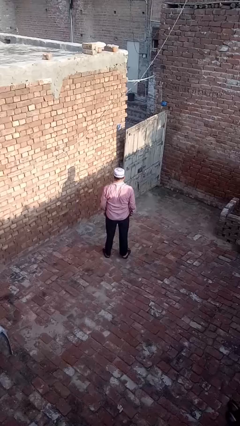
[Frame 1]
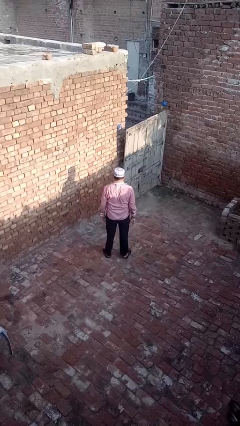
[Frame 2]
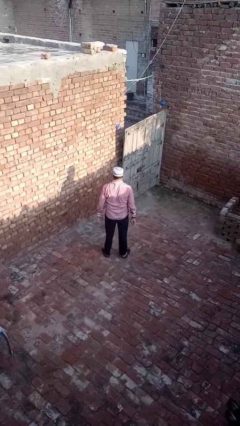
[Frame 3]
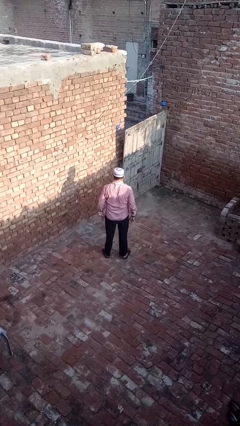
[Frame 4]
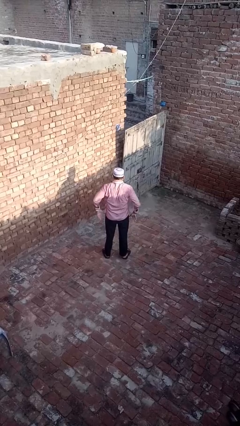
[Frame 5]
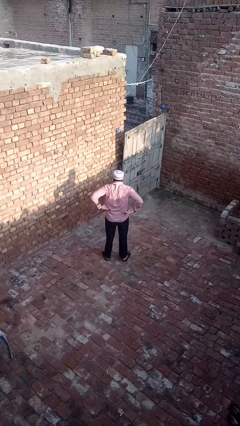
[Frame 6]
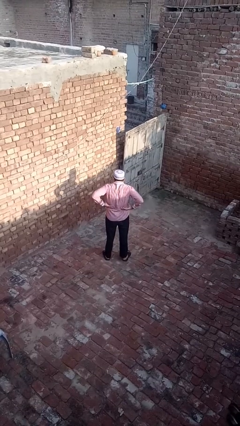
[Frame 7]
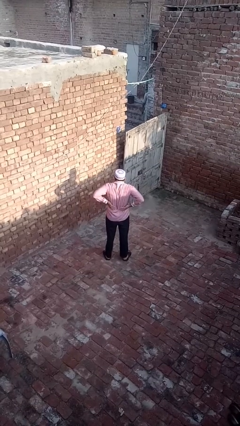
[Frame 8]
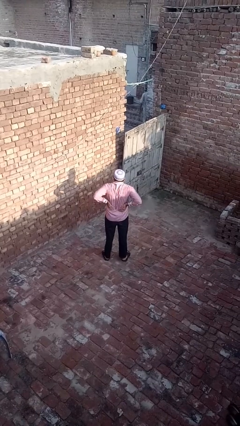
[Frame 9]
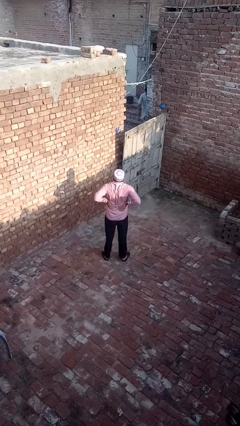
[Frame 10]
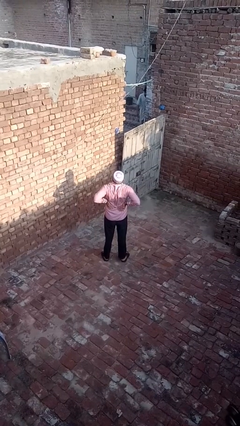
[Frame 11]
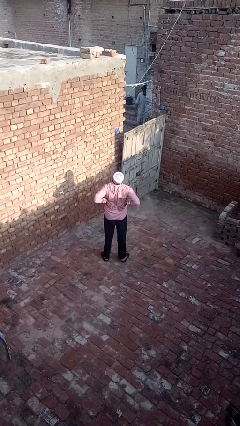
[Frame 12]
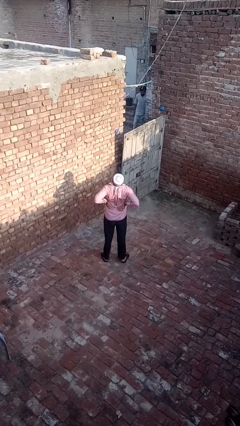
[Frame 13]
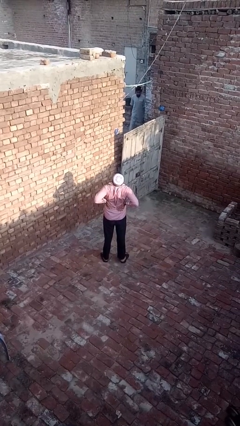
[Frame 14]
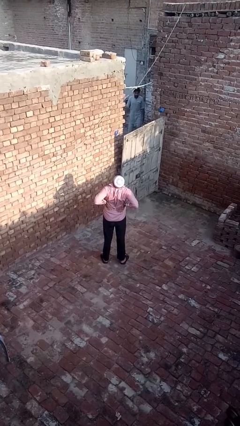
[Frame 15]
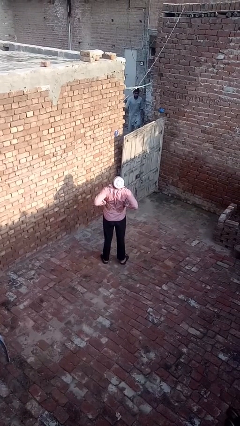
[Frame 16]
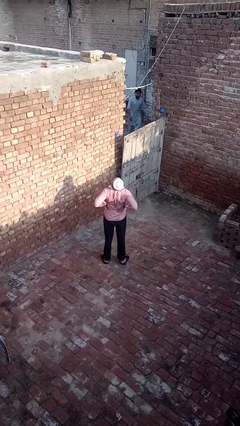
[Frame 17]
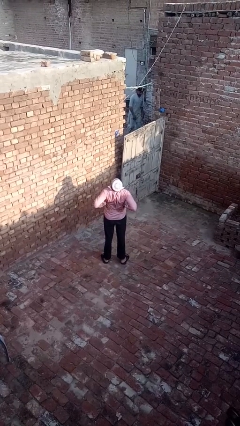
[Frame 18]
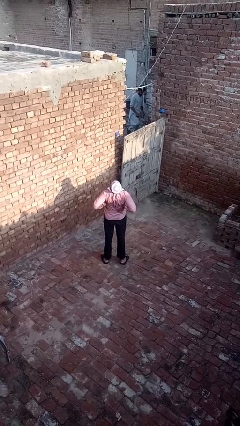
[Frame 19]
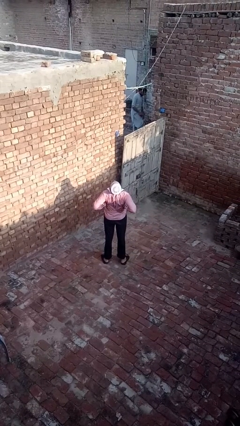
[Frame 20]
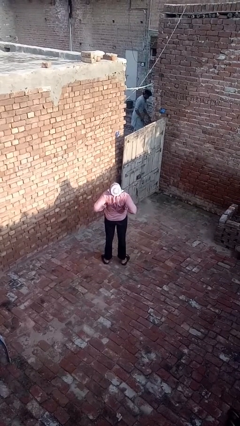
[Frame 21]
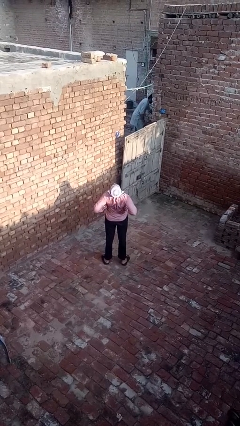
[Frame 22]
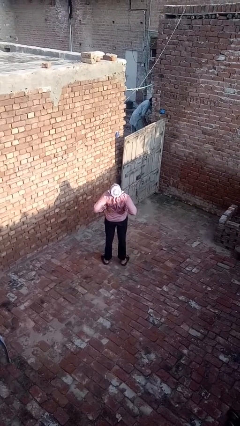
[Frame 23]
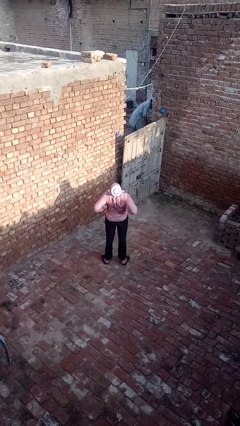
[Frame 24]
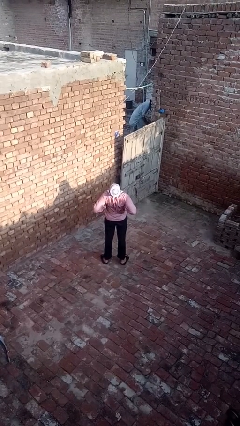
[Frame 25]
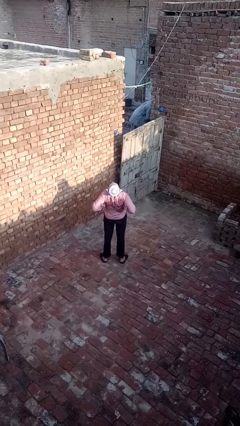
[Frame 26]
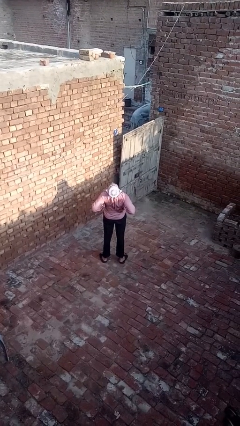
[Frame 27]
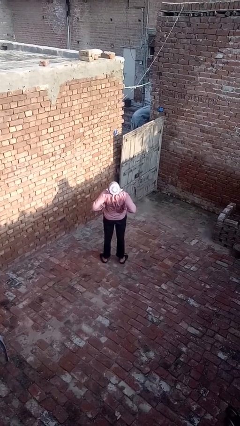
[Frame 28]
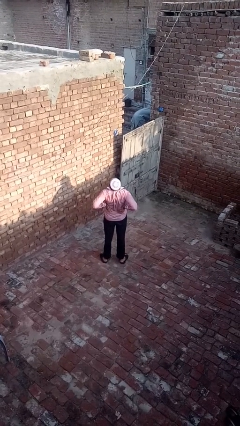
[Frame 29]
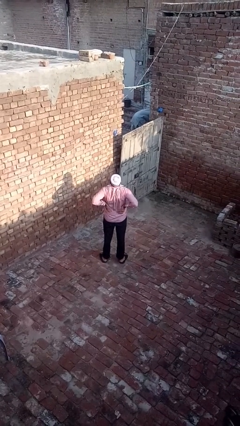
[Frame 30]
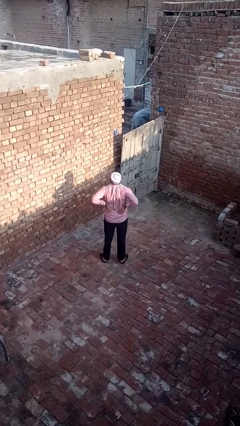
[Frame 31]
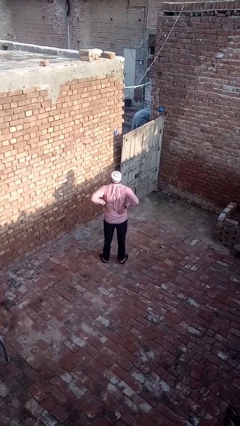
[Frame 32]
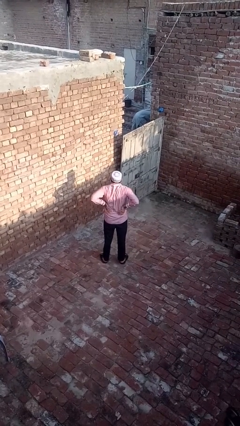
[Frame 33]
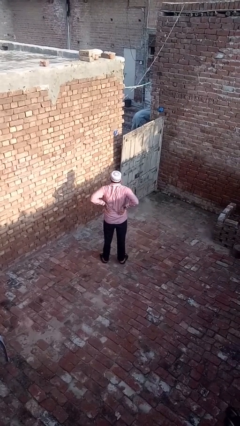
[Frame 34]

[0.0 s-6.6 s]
person stretches back

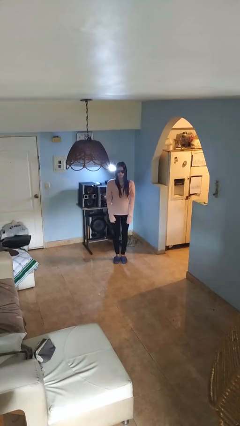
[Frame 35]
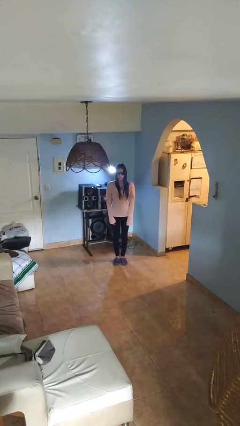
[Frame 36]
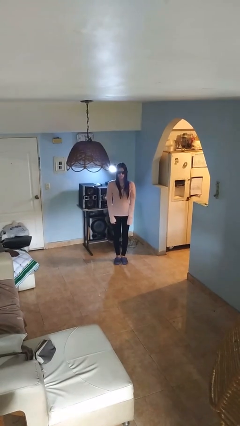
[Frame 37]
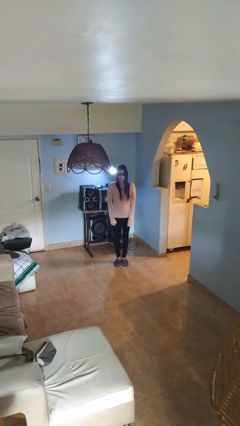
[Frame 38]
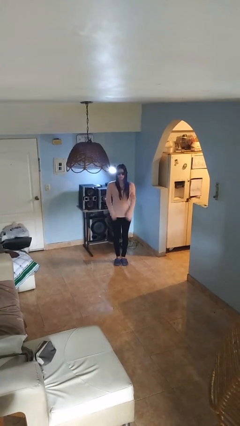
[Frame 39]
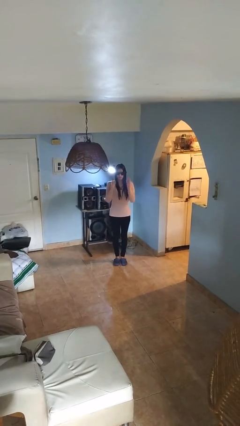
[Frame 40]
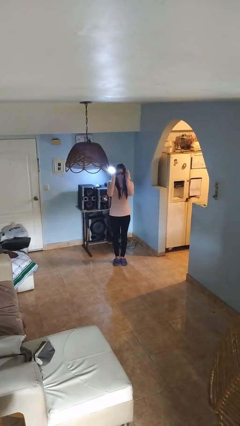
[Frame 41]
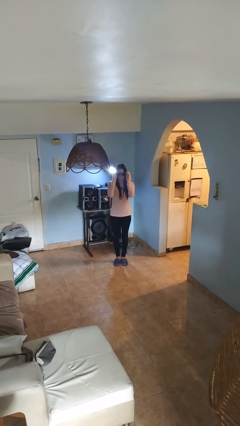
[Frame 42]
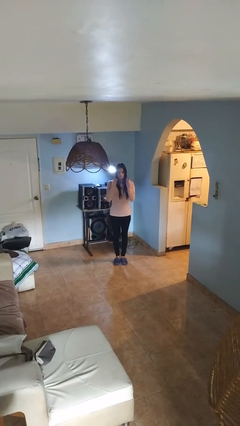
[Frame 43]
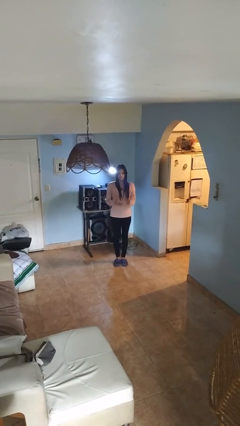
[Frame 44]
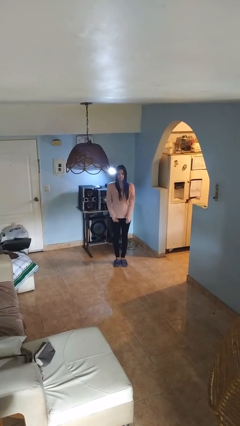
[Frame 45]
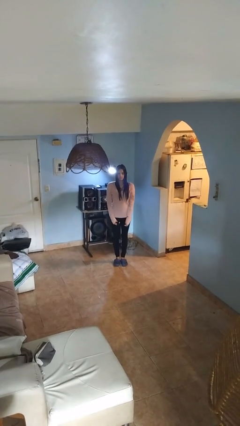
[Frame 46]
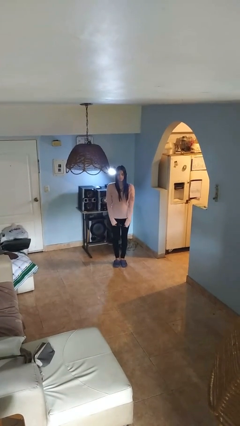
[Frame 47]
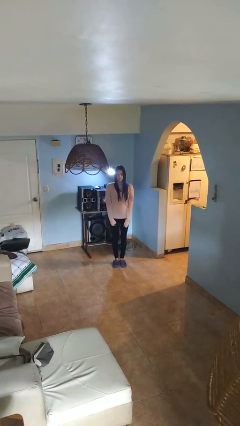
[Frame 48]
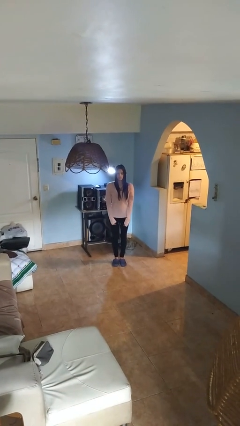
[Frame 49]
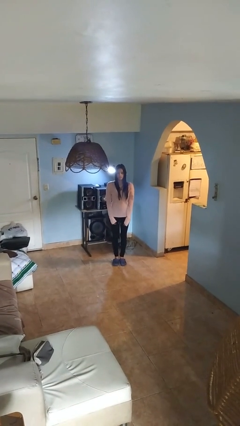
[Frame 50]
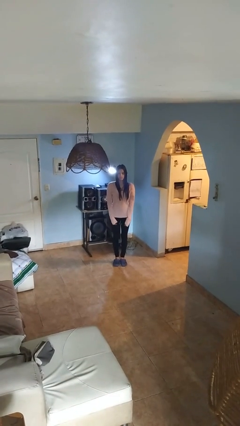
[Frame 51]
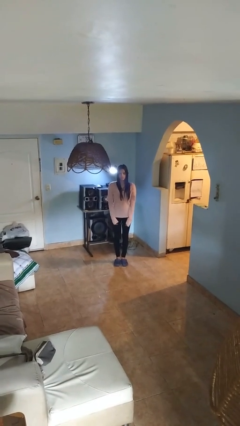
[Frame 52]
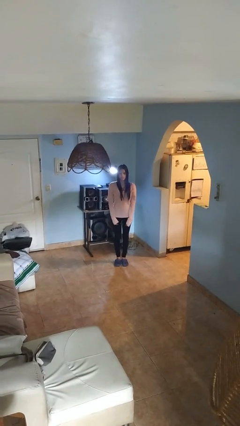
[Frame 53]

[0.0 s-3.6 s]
person takes off sunglasses

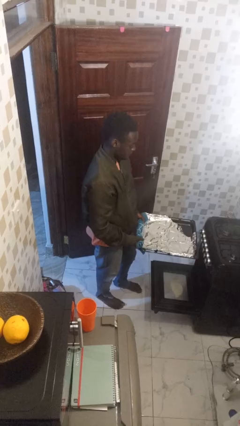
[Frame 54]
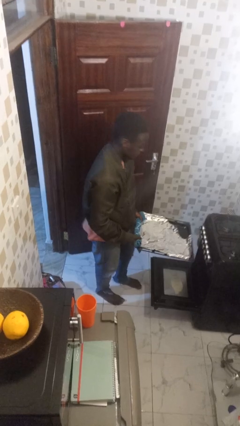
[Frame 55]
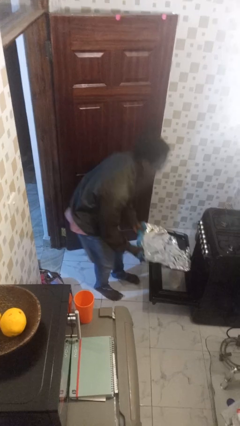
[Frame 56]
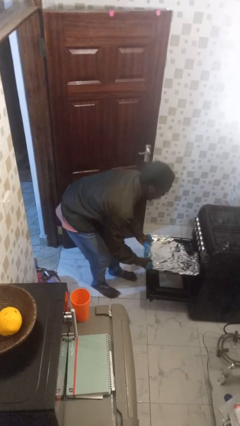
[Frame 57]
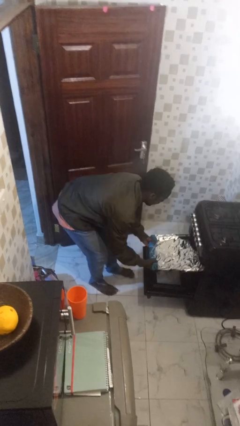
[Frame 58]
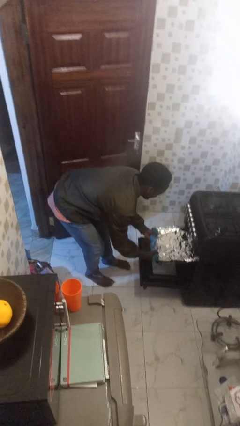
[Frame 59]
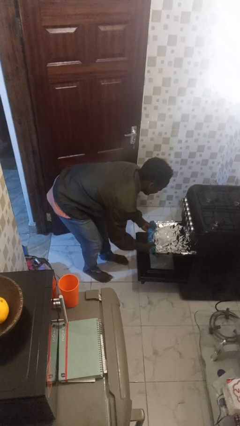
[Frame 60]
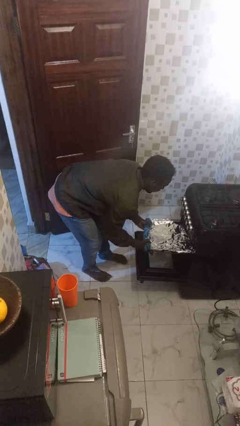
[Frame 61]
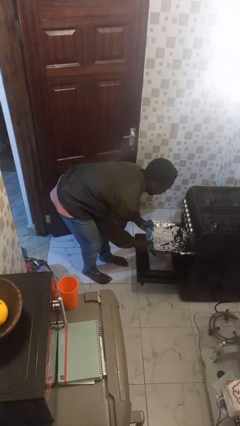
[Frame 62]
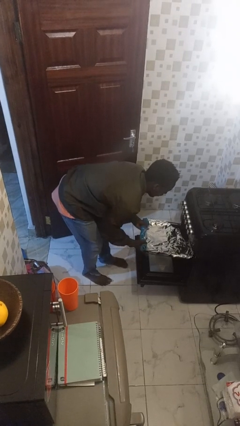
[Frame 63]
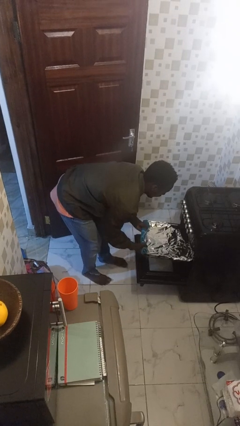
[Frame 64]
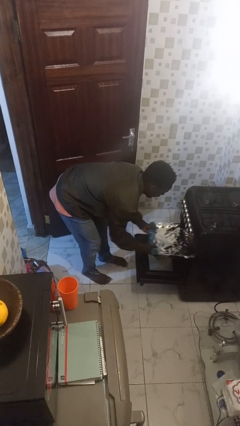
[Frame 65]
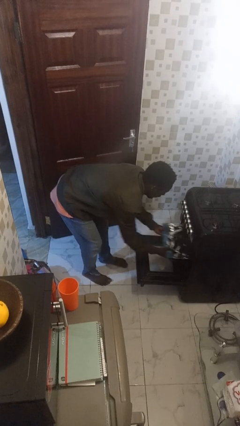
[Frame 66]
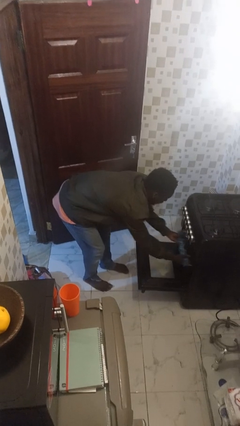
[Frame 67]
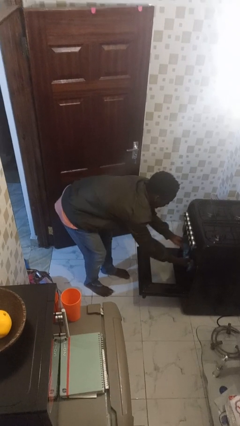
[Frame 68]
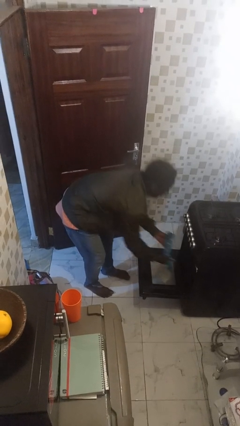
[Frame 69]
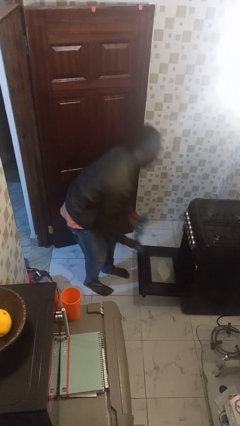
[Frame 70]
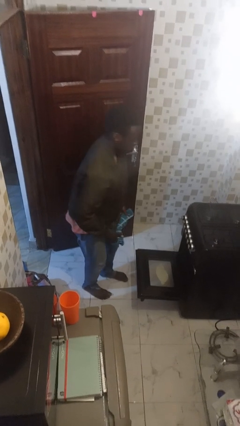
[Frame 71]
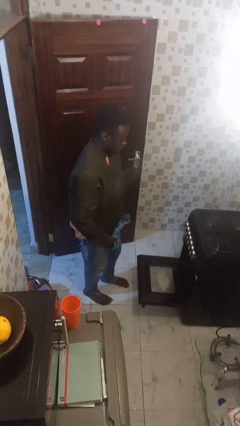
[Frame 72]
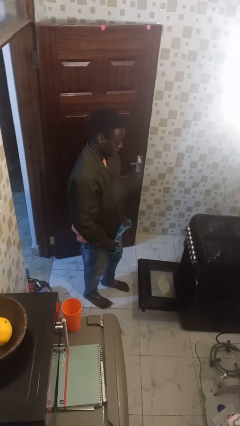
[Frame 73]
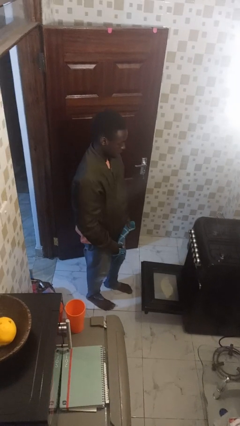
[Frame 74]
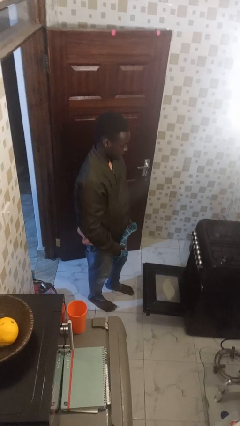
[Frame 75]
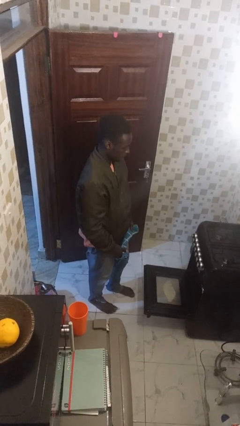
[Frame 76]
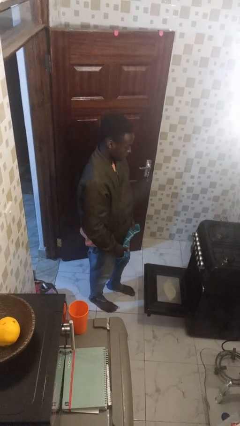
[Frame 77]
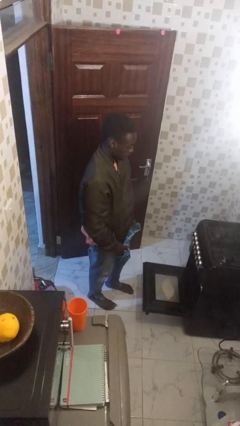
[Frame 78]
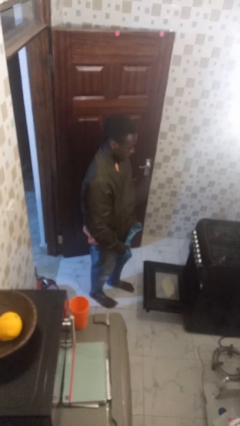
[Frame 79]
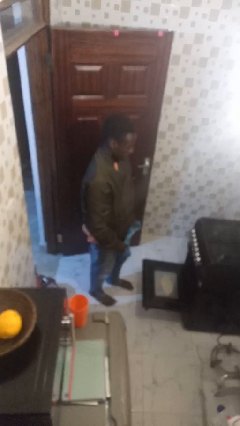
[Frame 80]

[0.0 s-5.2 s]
person puts object into oven

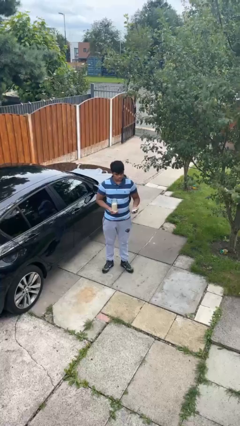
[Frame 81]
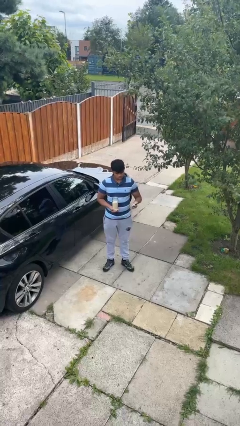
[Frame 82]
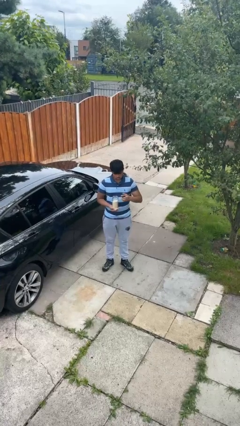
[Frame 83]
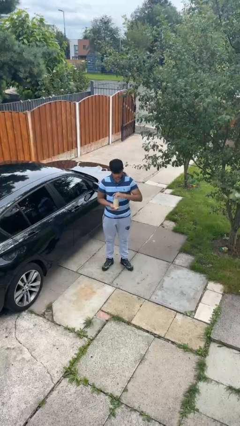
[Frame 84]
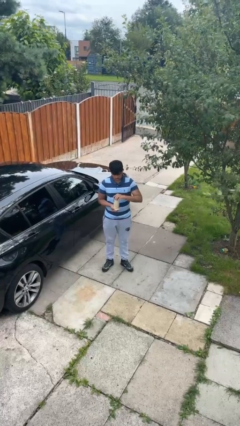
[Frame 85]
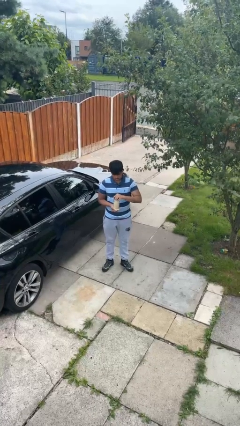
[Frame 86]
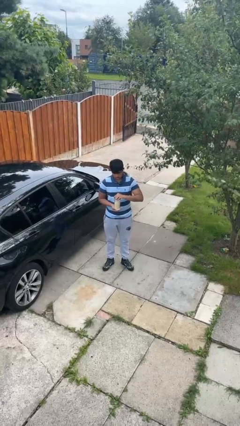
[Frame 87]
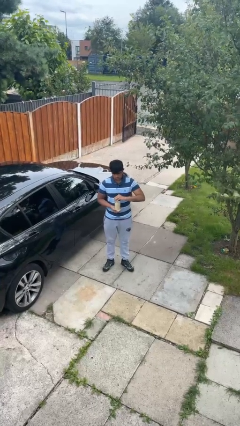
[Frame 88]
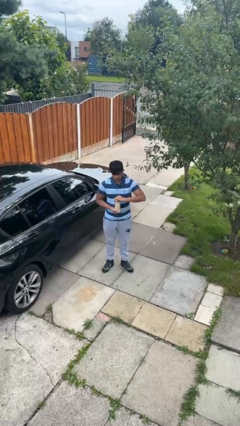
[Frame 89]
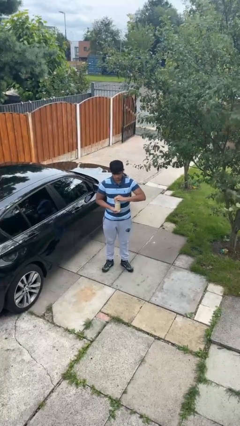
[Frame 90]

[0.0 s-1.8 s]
person closes jar

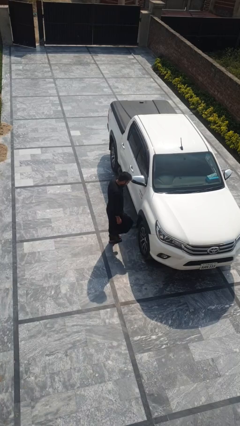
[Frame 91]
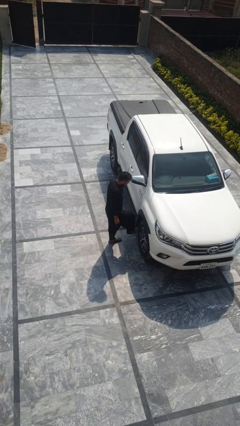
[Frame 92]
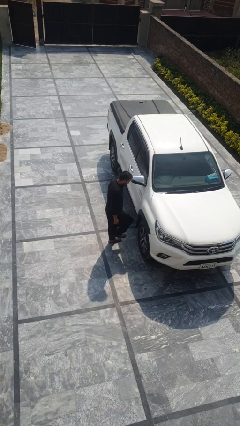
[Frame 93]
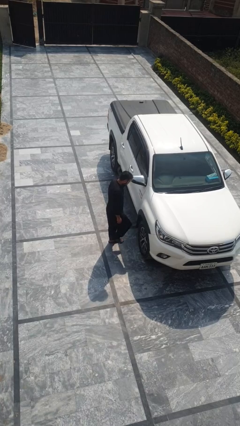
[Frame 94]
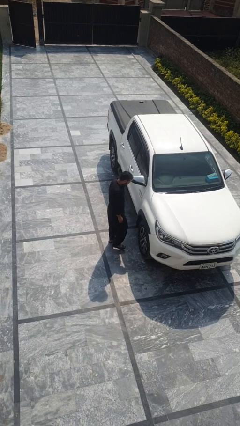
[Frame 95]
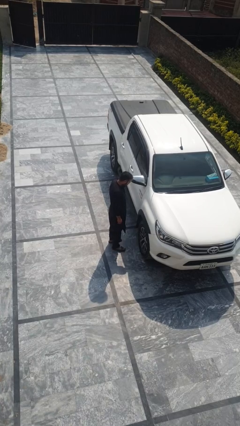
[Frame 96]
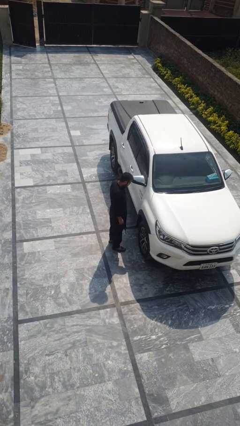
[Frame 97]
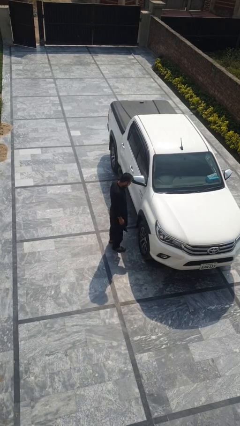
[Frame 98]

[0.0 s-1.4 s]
person kicks car tires
